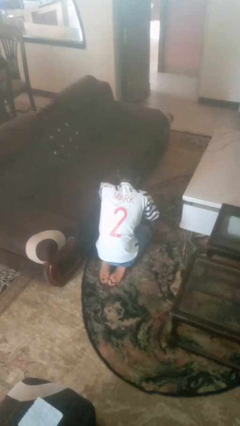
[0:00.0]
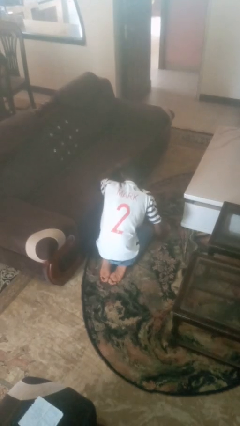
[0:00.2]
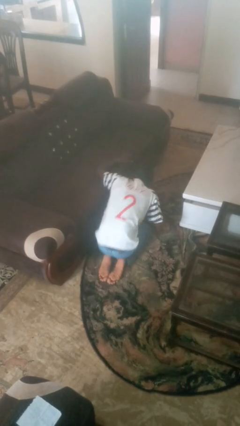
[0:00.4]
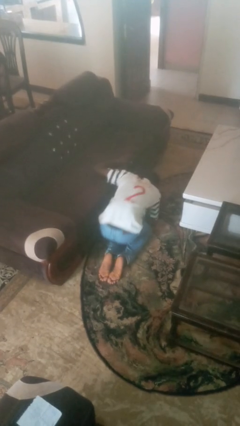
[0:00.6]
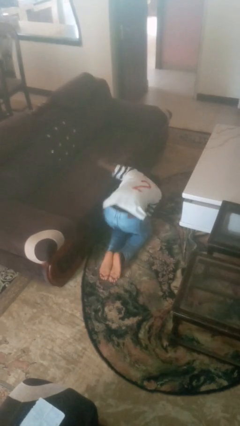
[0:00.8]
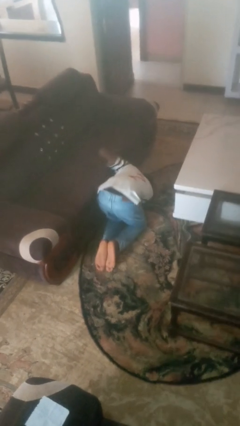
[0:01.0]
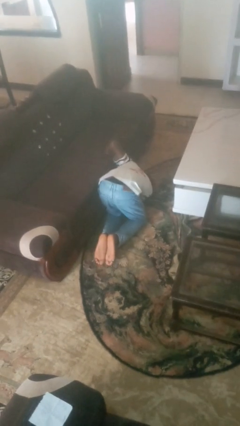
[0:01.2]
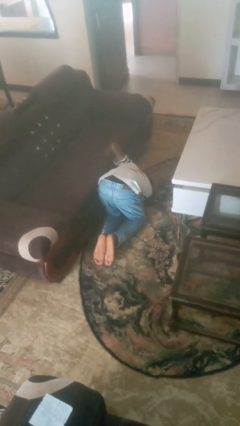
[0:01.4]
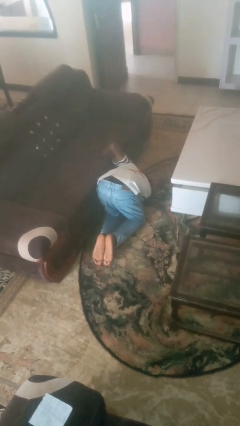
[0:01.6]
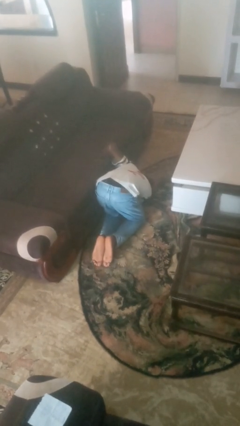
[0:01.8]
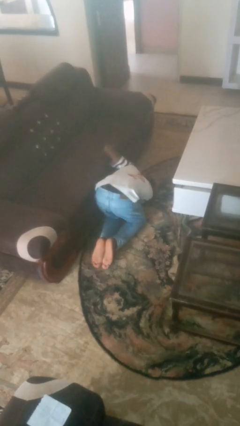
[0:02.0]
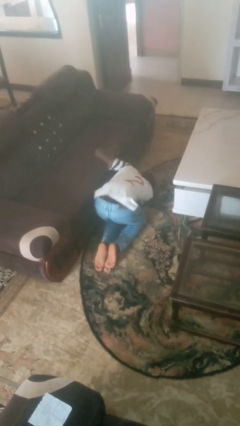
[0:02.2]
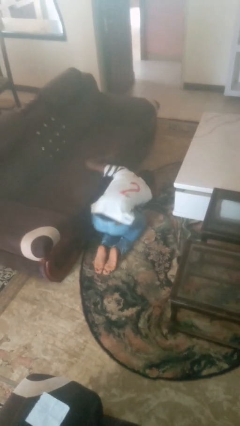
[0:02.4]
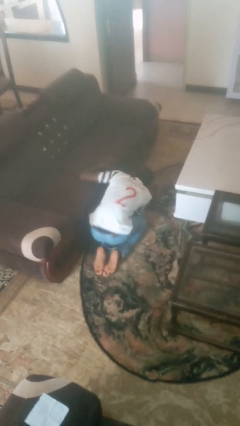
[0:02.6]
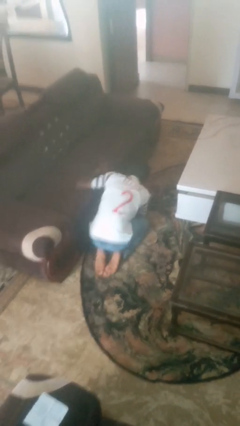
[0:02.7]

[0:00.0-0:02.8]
person searches under couch

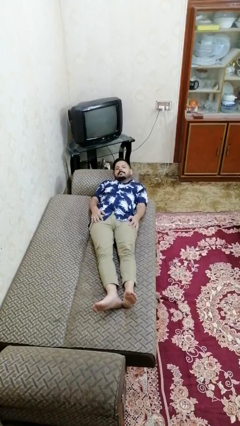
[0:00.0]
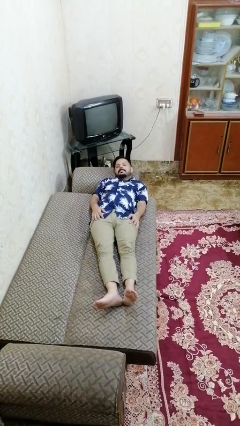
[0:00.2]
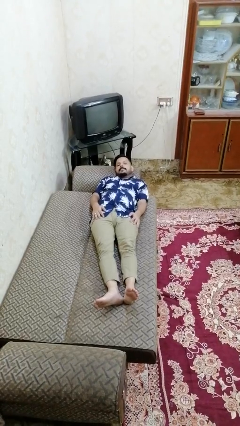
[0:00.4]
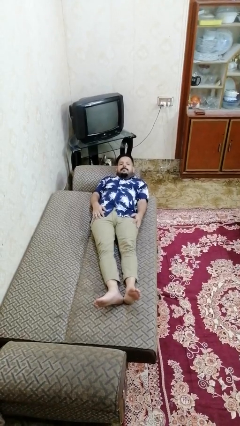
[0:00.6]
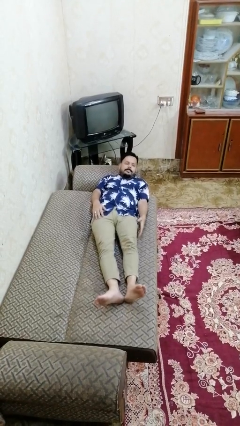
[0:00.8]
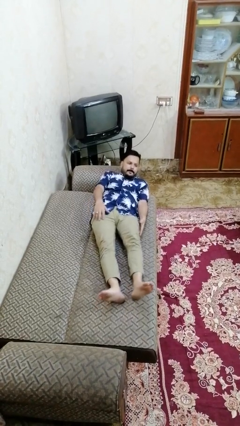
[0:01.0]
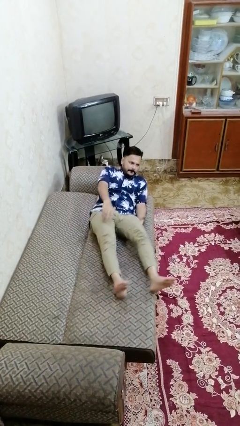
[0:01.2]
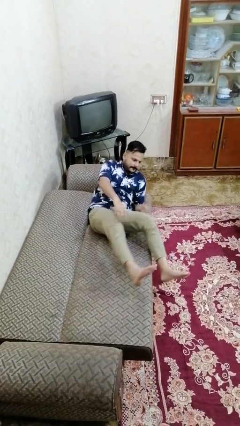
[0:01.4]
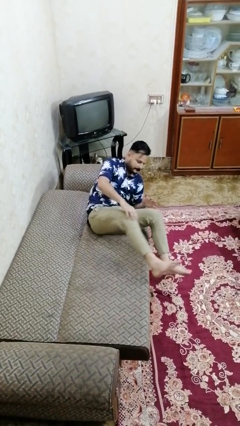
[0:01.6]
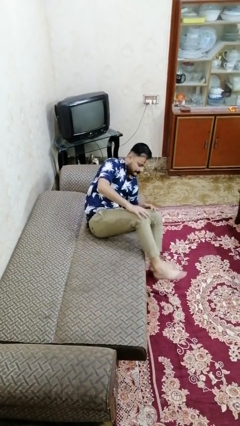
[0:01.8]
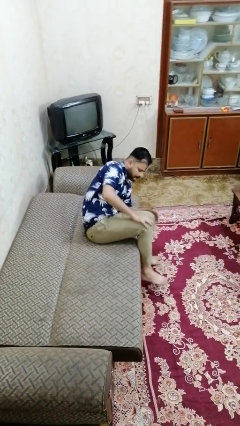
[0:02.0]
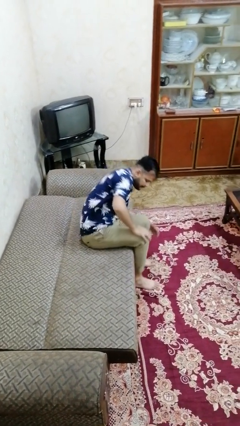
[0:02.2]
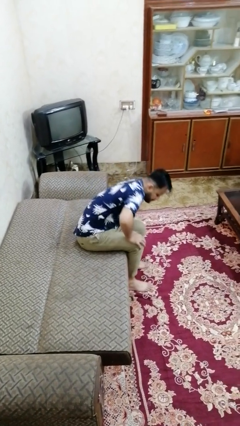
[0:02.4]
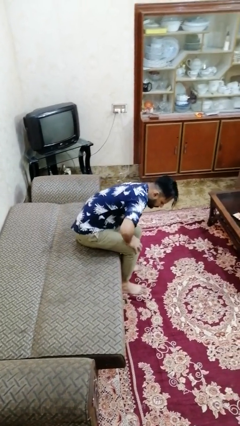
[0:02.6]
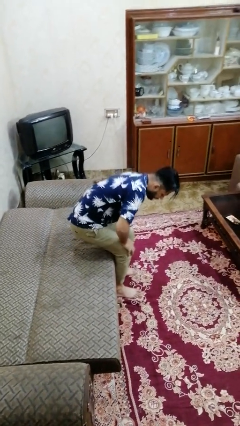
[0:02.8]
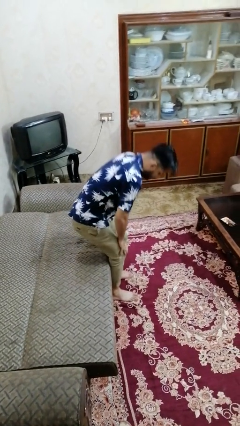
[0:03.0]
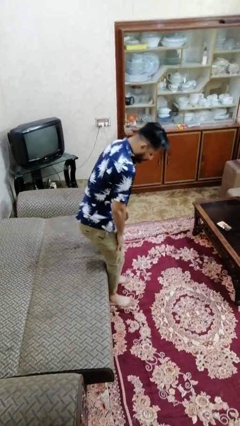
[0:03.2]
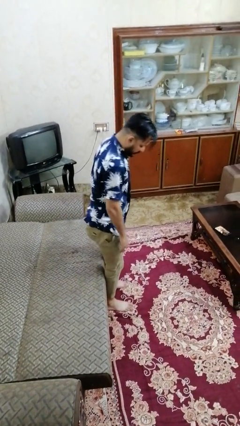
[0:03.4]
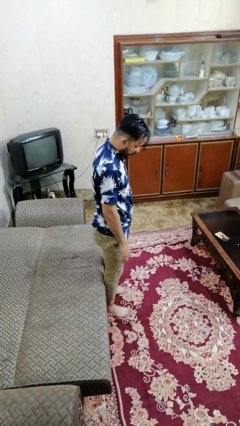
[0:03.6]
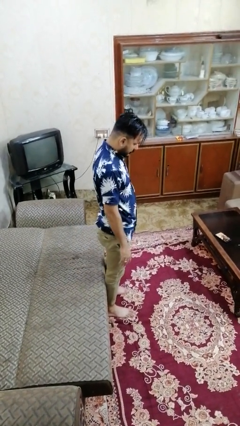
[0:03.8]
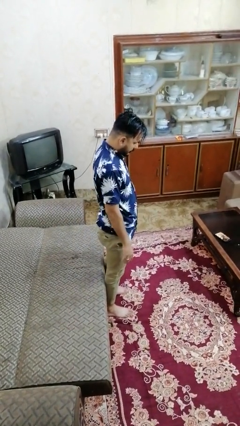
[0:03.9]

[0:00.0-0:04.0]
person stands up

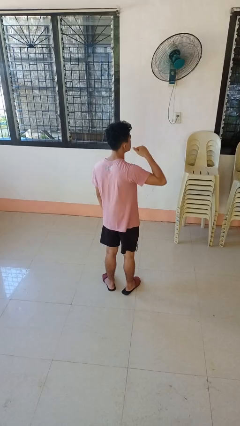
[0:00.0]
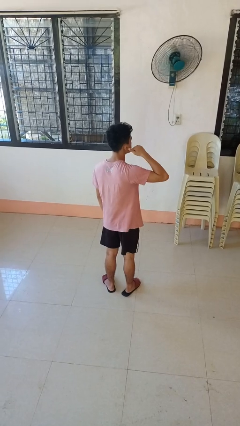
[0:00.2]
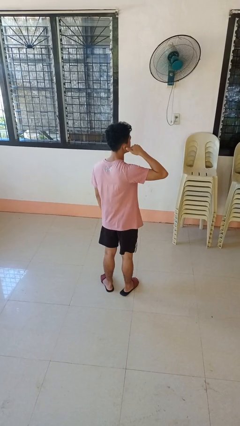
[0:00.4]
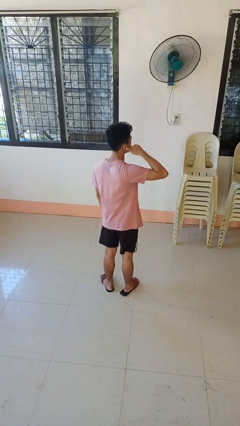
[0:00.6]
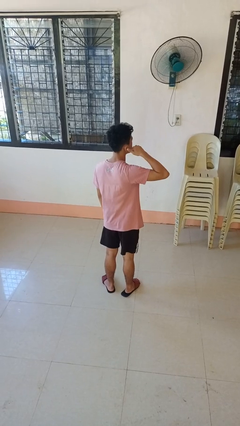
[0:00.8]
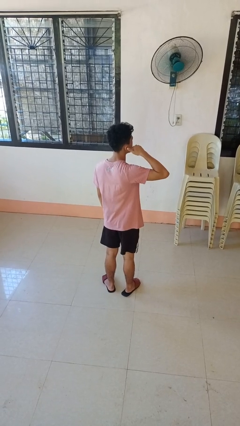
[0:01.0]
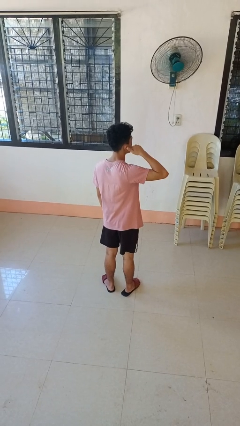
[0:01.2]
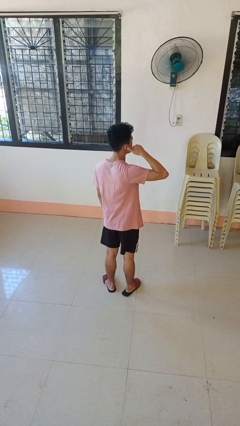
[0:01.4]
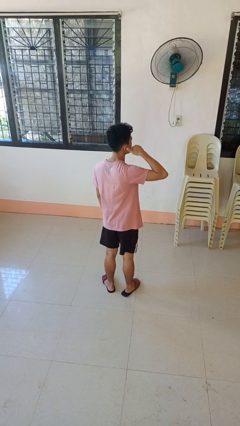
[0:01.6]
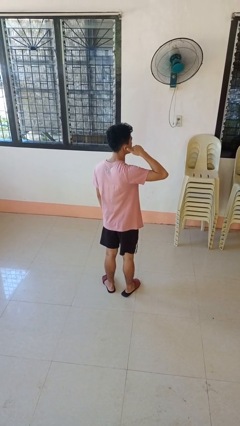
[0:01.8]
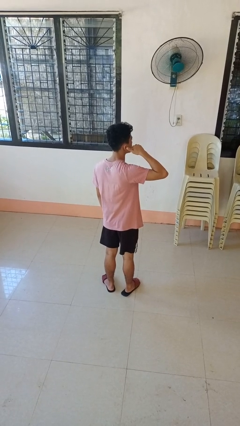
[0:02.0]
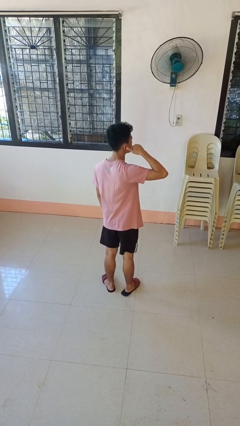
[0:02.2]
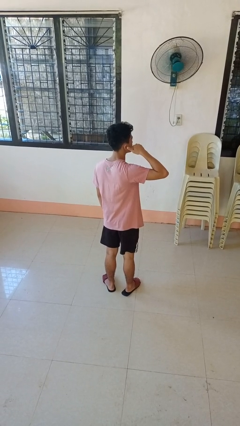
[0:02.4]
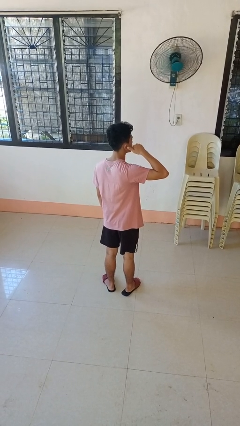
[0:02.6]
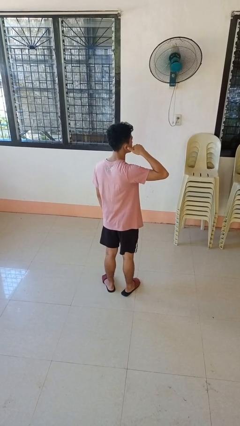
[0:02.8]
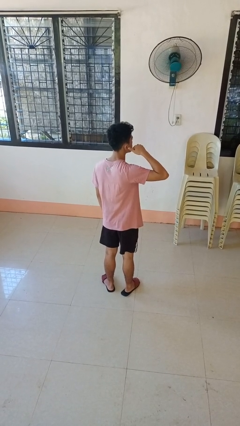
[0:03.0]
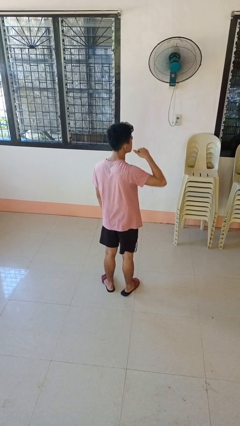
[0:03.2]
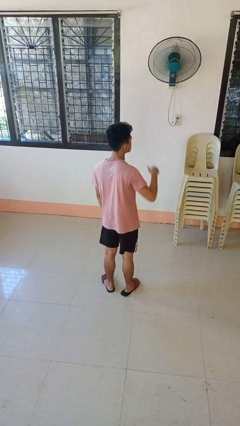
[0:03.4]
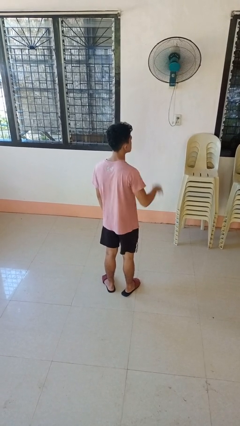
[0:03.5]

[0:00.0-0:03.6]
person gestures call me

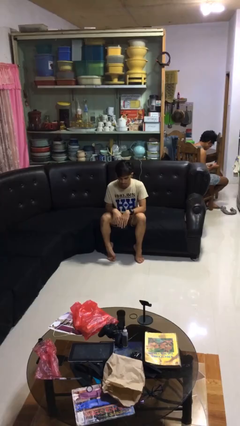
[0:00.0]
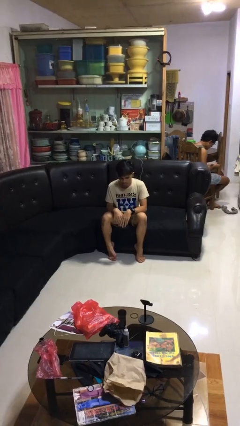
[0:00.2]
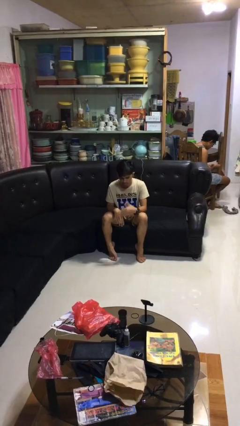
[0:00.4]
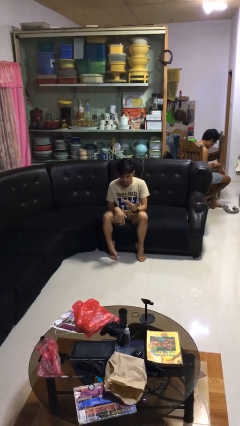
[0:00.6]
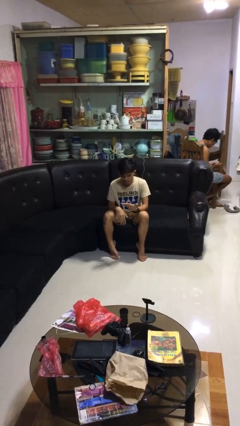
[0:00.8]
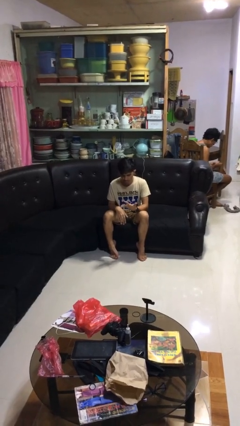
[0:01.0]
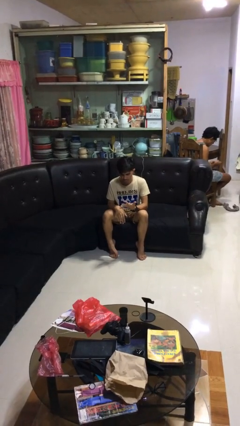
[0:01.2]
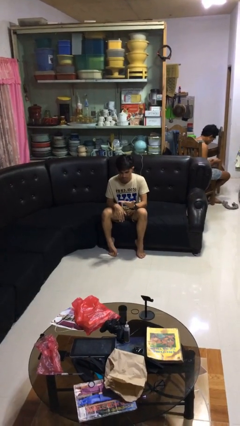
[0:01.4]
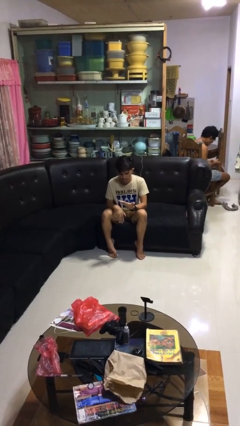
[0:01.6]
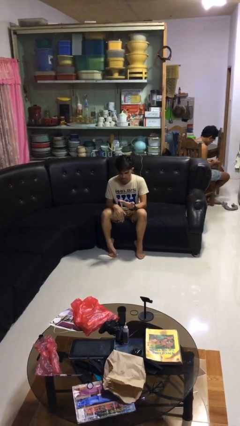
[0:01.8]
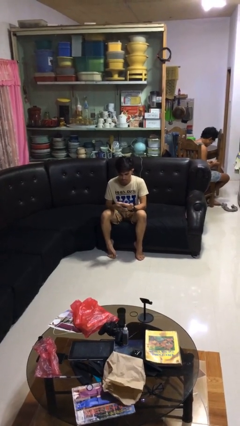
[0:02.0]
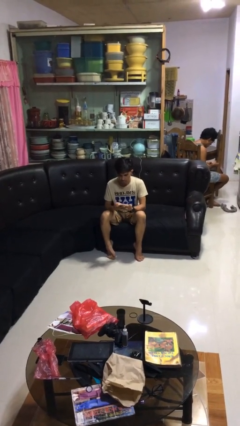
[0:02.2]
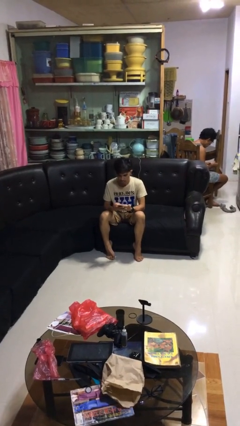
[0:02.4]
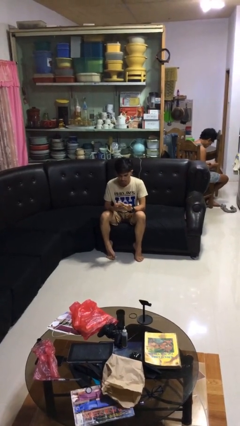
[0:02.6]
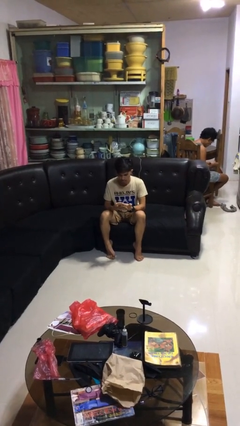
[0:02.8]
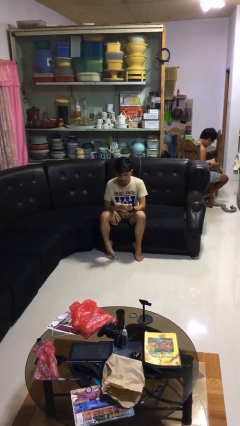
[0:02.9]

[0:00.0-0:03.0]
person looks at hands in lap

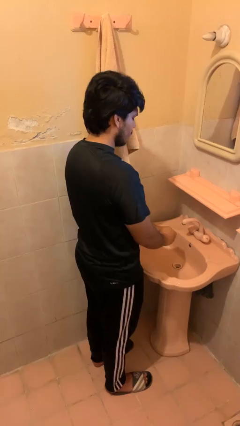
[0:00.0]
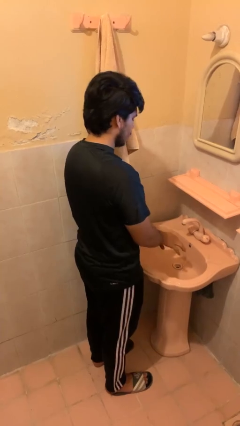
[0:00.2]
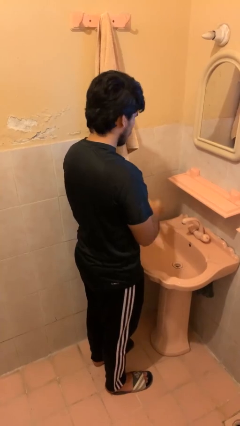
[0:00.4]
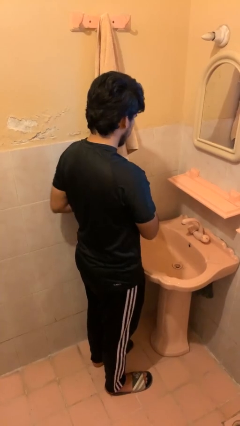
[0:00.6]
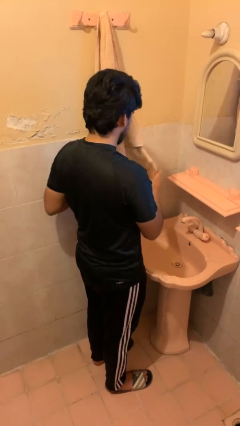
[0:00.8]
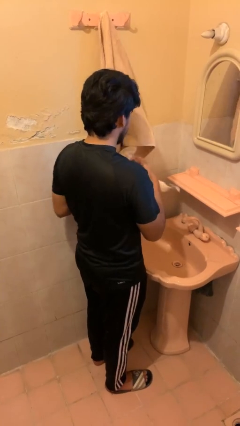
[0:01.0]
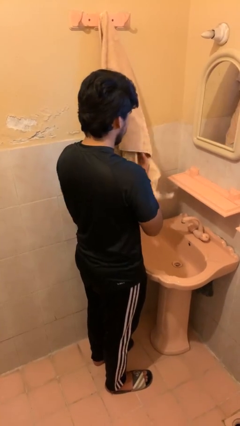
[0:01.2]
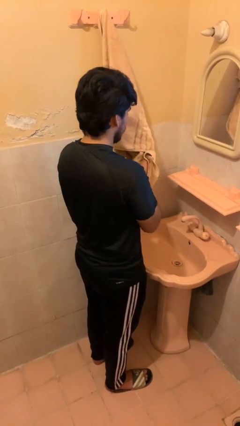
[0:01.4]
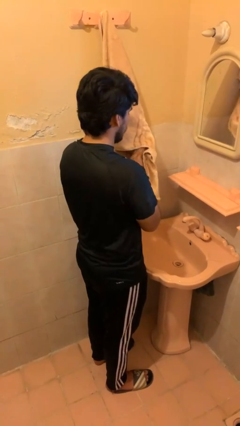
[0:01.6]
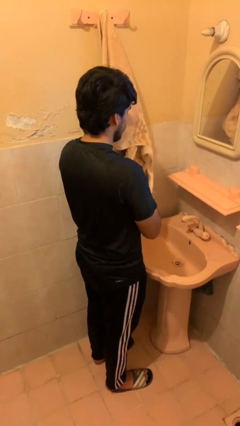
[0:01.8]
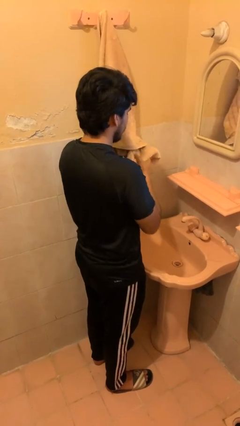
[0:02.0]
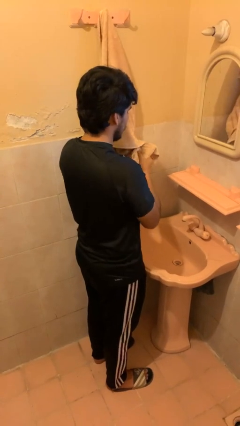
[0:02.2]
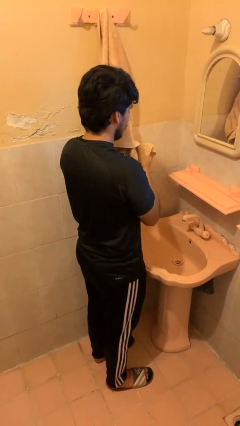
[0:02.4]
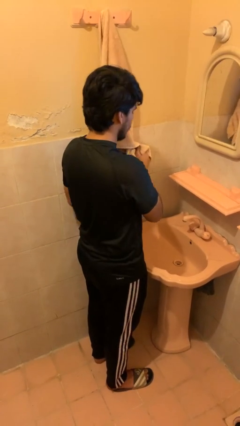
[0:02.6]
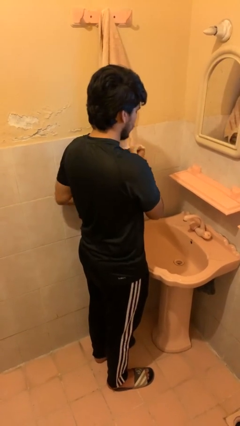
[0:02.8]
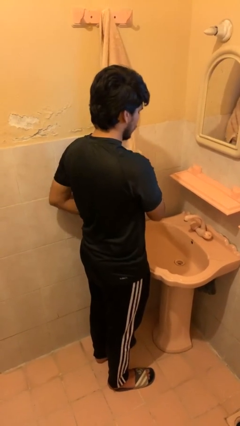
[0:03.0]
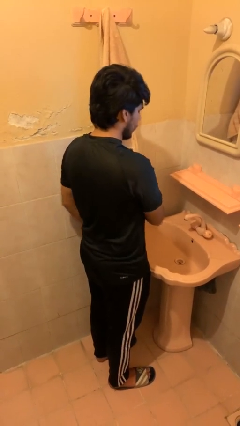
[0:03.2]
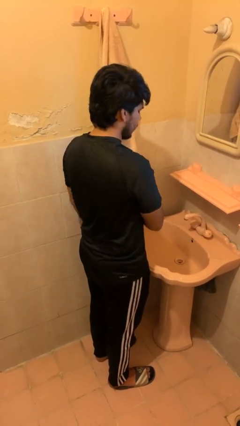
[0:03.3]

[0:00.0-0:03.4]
person dries hands with towel

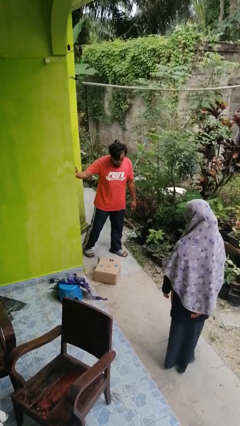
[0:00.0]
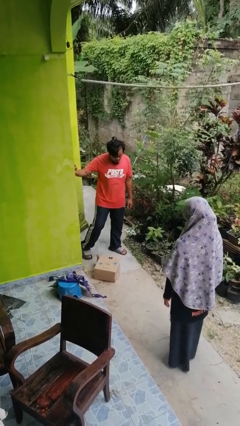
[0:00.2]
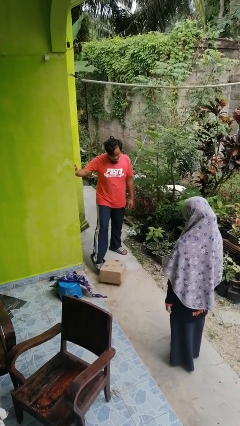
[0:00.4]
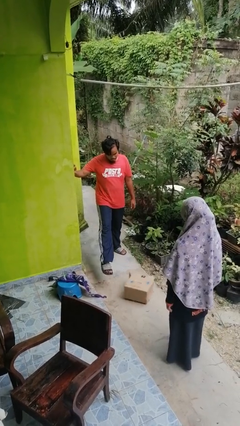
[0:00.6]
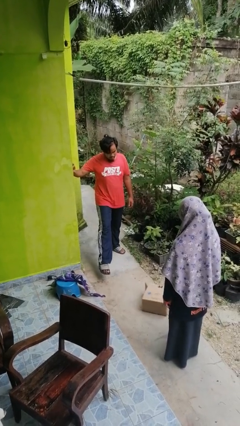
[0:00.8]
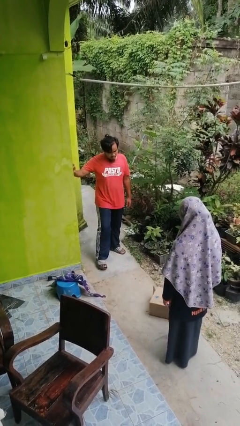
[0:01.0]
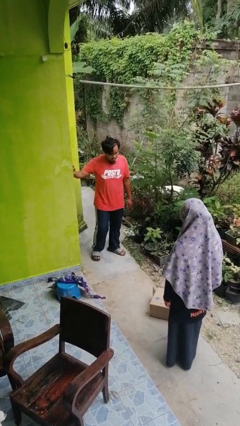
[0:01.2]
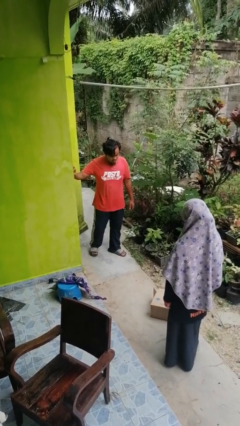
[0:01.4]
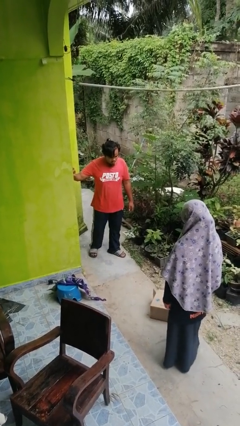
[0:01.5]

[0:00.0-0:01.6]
person kicks object to person
